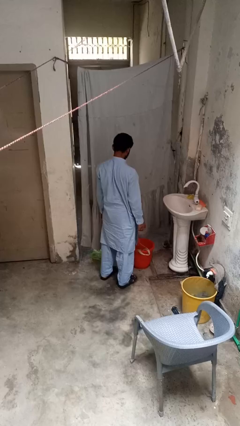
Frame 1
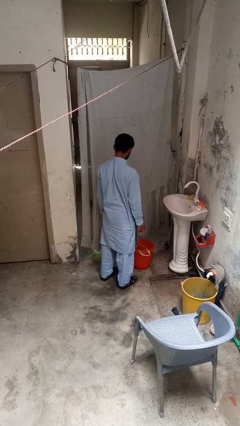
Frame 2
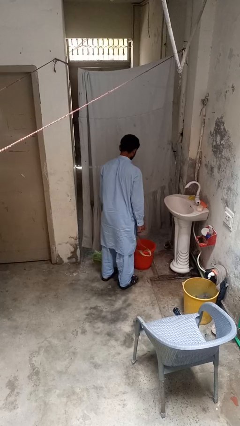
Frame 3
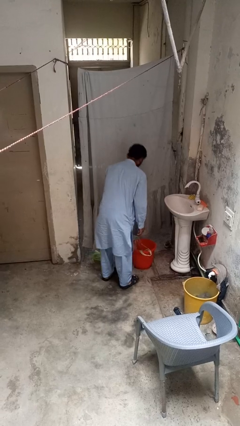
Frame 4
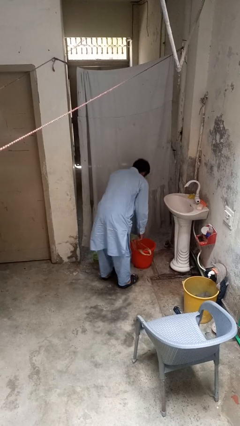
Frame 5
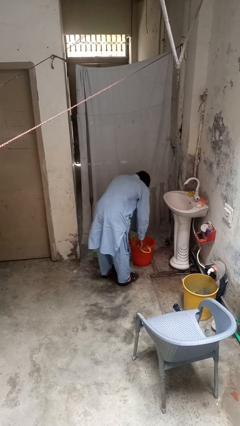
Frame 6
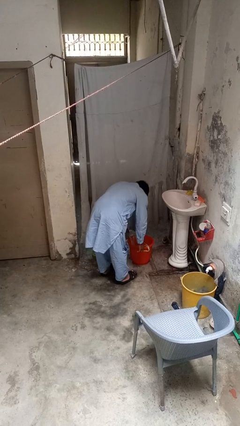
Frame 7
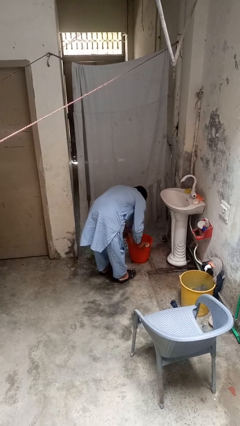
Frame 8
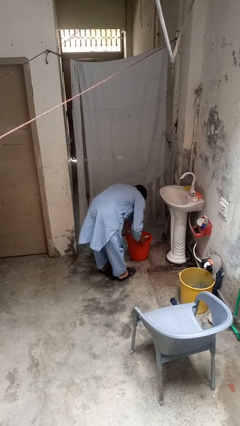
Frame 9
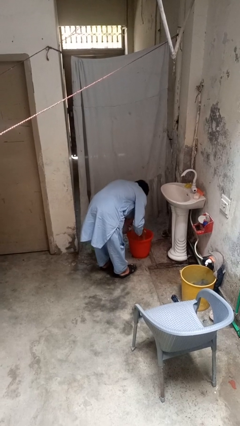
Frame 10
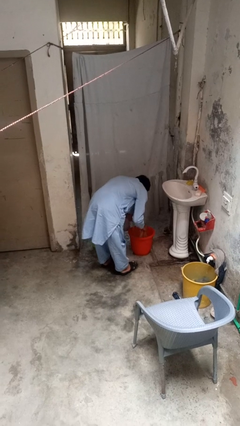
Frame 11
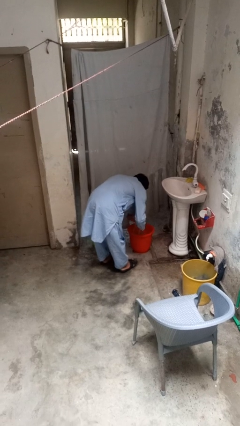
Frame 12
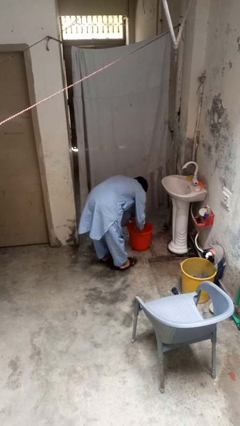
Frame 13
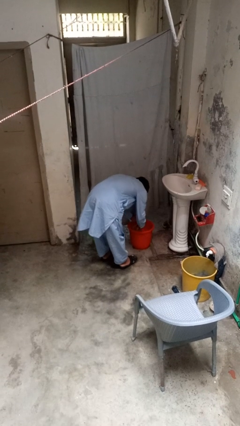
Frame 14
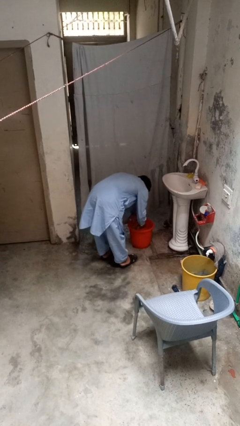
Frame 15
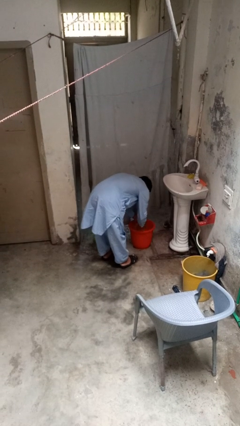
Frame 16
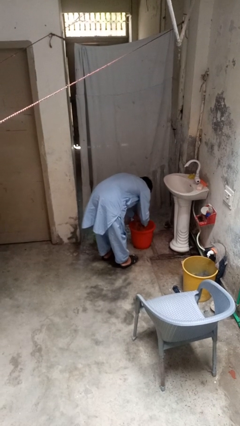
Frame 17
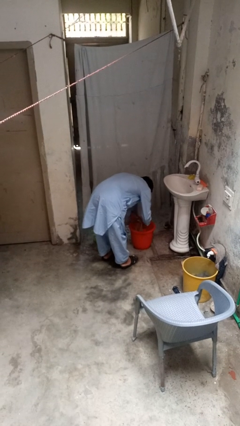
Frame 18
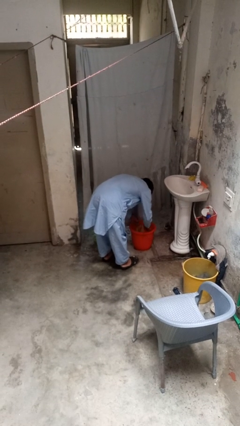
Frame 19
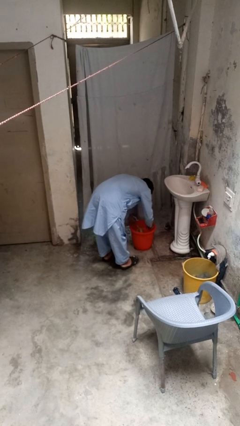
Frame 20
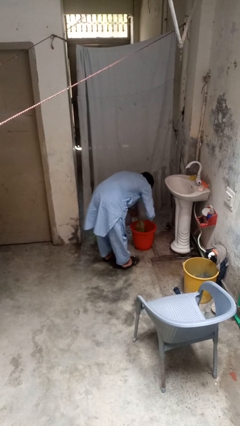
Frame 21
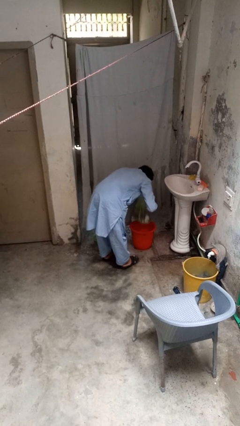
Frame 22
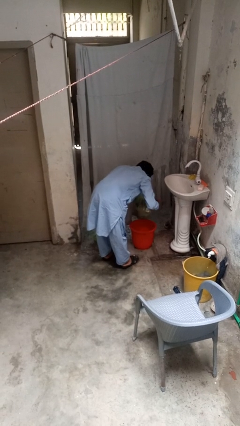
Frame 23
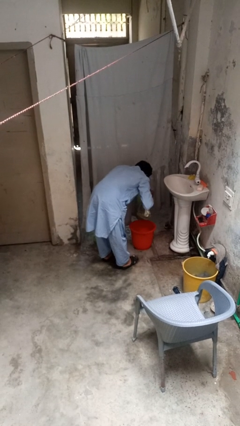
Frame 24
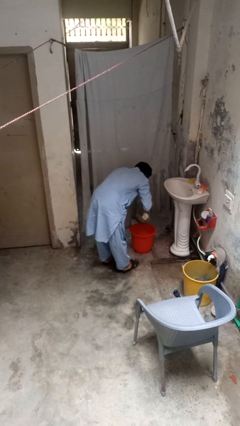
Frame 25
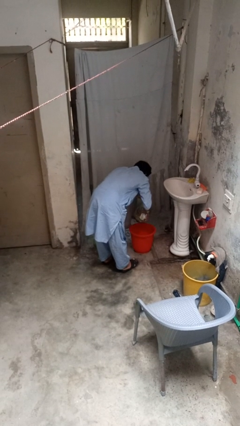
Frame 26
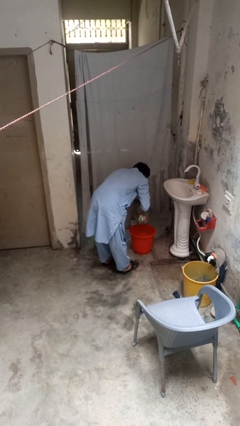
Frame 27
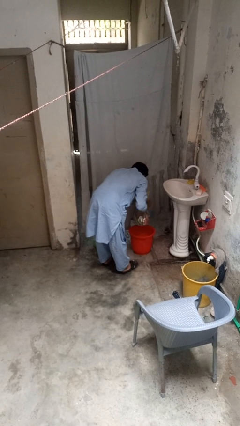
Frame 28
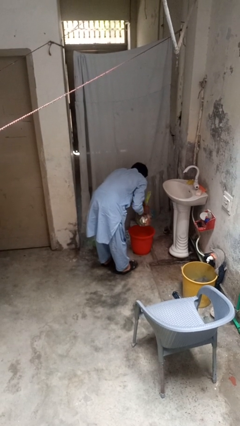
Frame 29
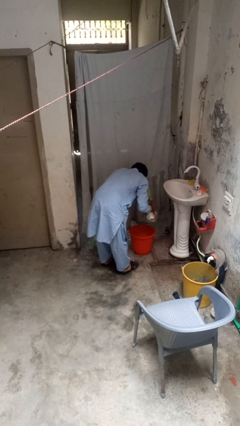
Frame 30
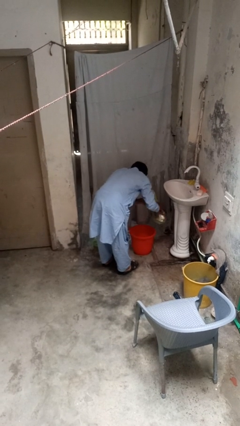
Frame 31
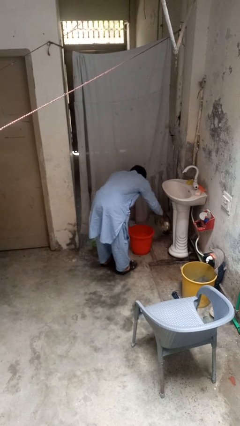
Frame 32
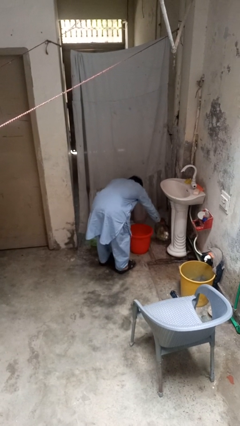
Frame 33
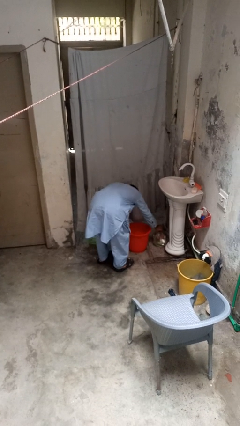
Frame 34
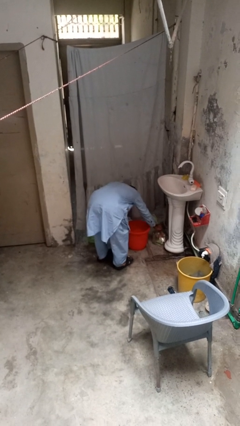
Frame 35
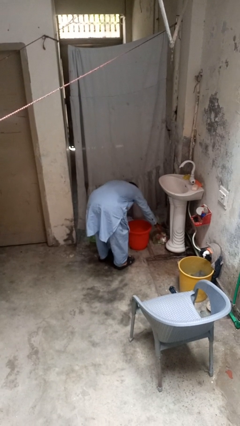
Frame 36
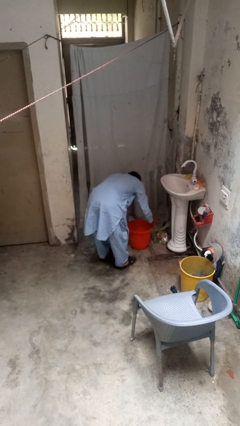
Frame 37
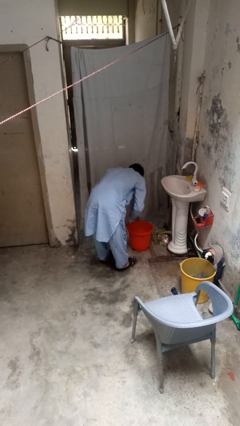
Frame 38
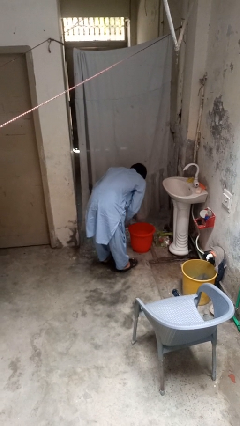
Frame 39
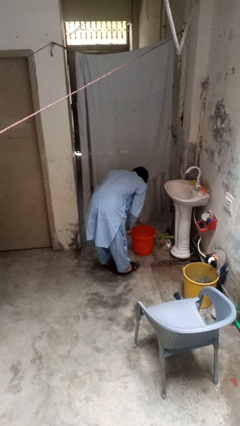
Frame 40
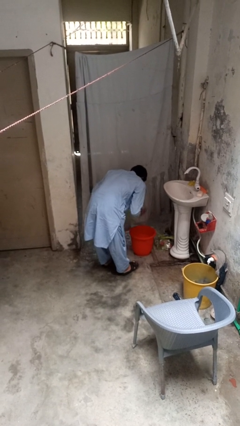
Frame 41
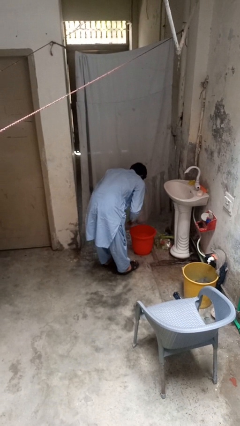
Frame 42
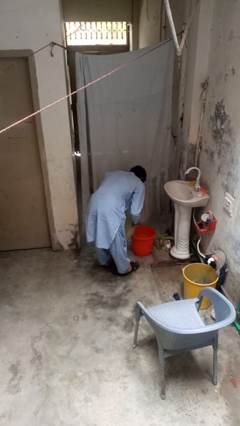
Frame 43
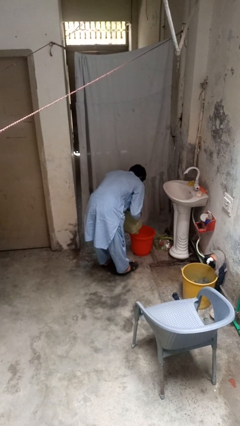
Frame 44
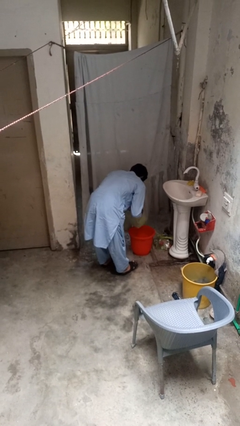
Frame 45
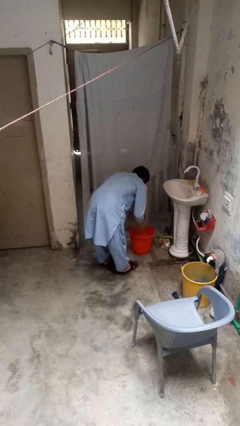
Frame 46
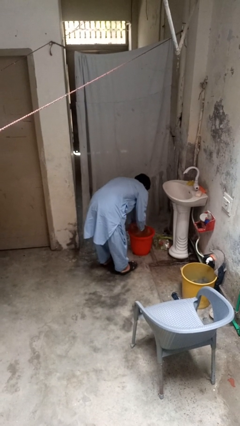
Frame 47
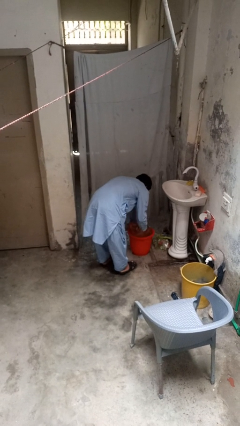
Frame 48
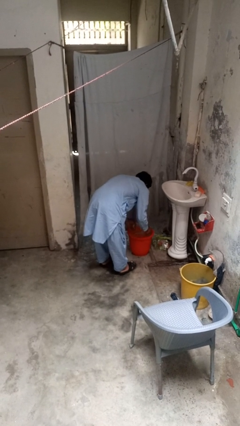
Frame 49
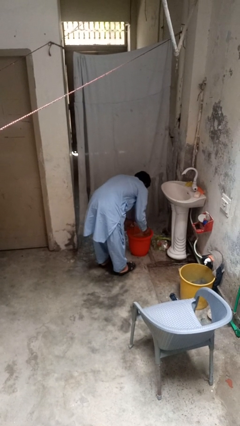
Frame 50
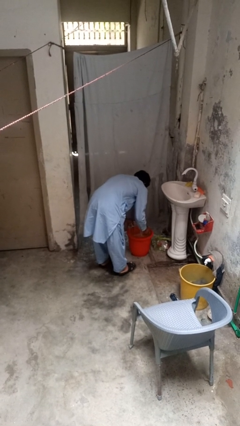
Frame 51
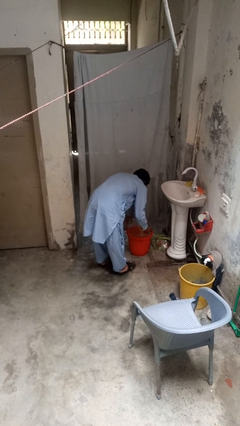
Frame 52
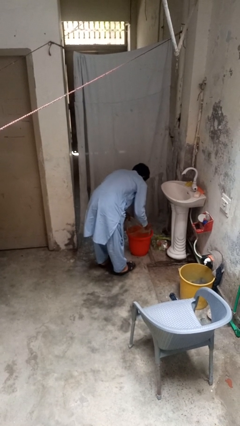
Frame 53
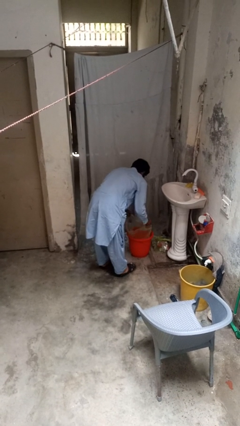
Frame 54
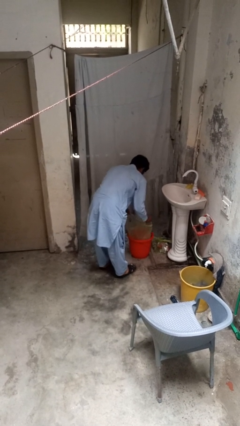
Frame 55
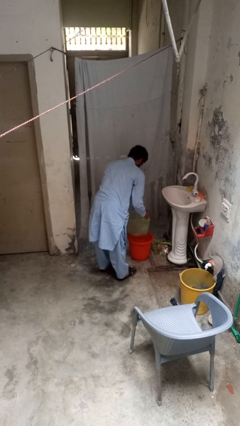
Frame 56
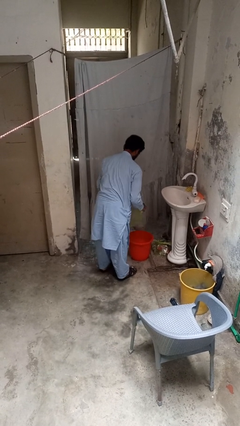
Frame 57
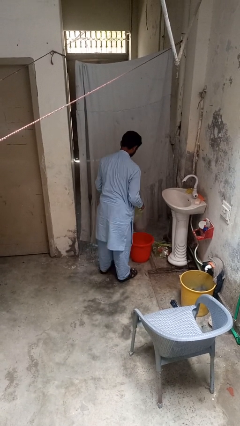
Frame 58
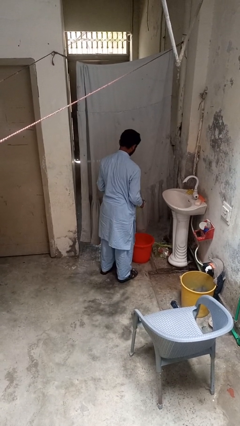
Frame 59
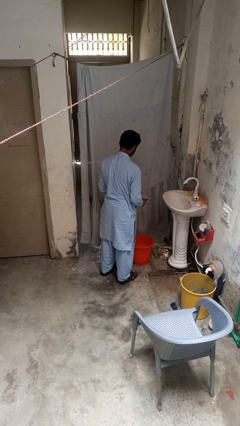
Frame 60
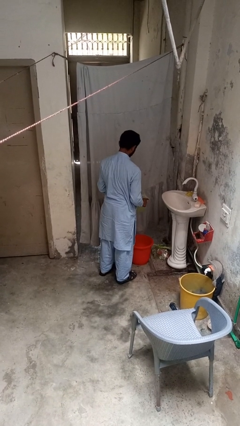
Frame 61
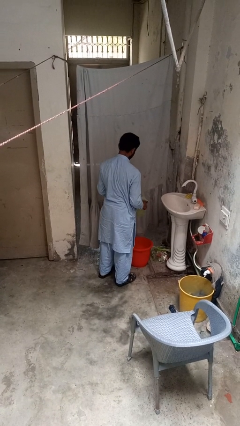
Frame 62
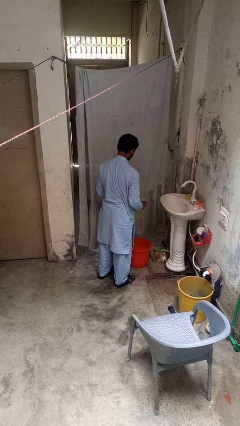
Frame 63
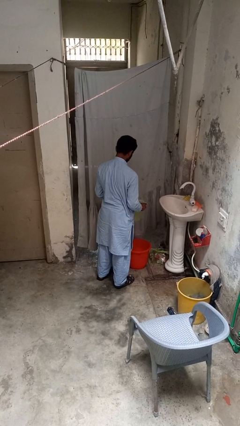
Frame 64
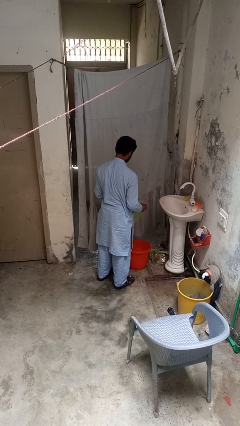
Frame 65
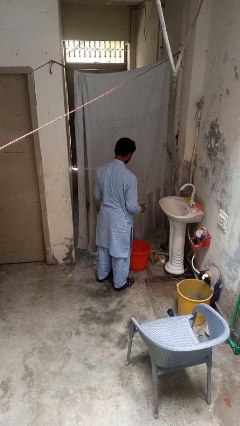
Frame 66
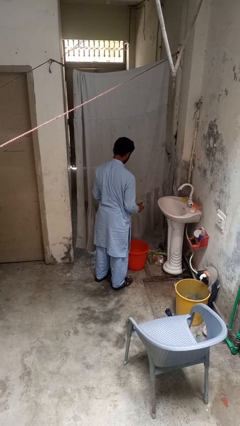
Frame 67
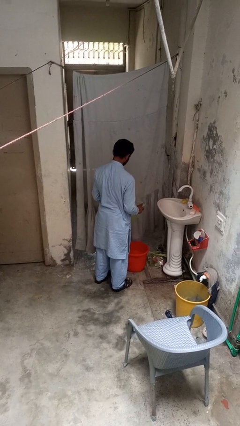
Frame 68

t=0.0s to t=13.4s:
person removes trashbag from trashcan

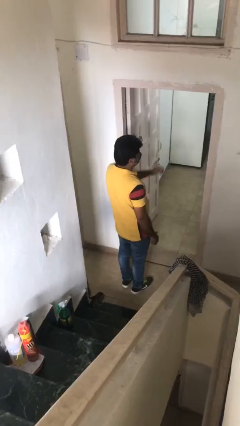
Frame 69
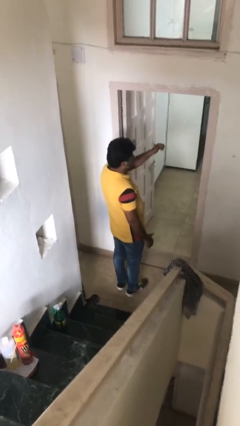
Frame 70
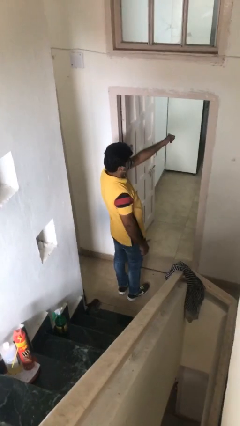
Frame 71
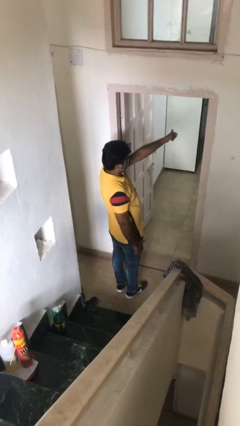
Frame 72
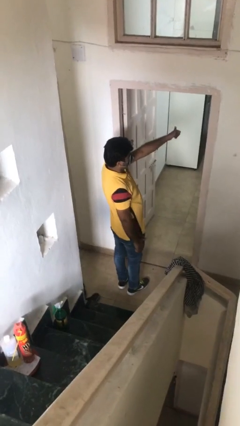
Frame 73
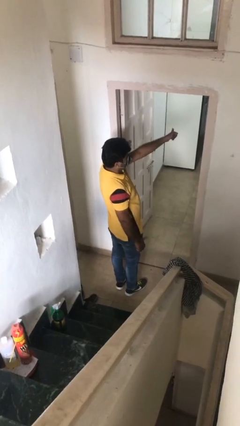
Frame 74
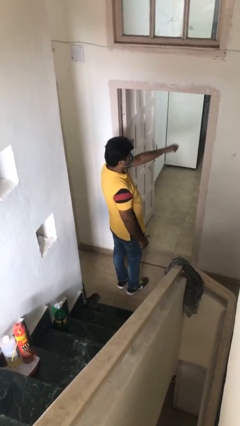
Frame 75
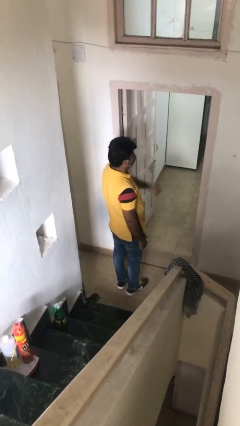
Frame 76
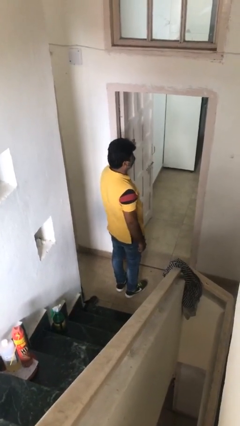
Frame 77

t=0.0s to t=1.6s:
person gestures thumbs up

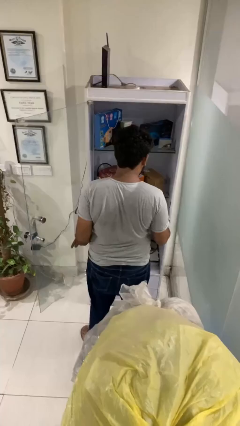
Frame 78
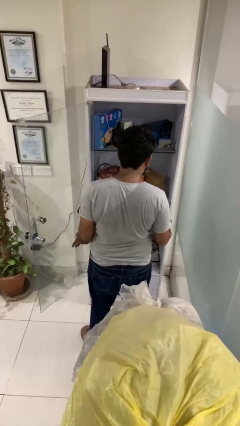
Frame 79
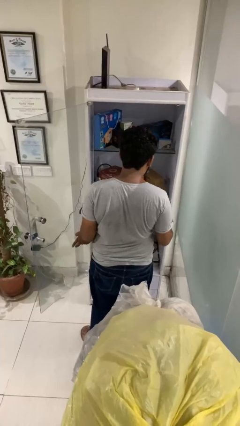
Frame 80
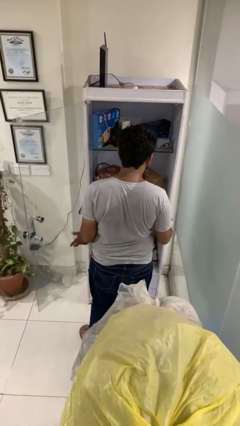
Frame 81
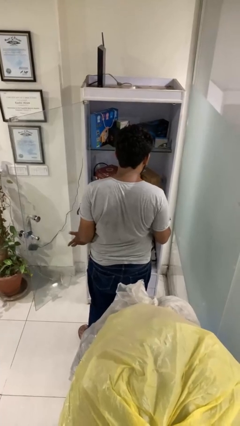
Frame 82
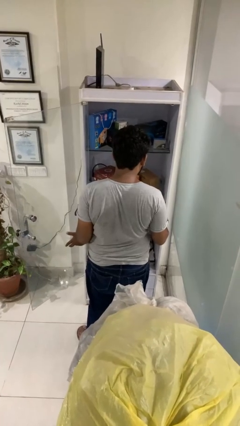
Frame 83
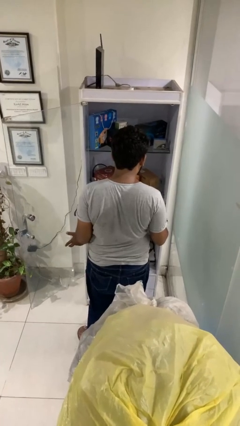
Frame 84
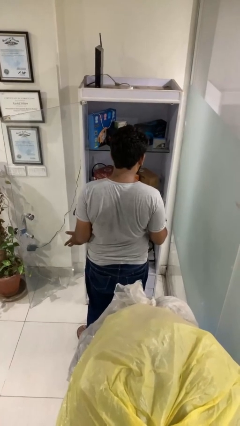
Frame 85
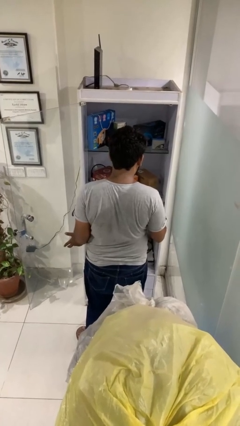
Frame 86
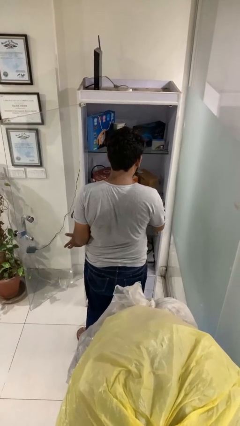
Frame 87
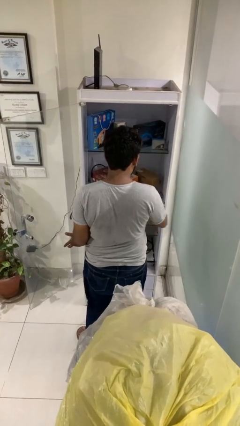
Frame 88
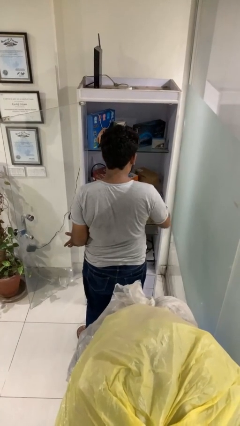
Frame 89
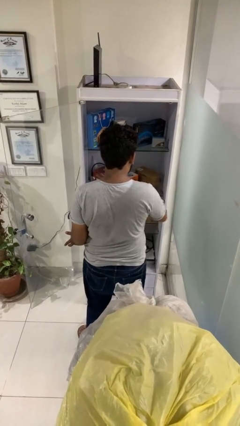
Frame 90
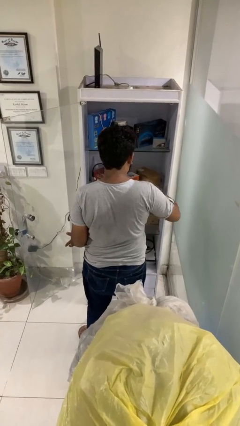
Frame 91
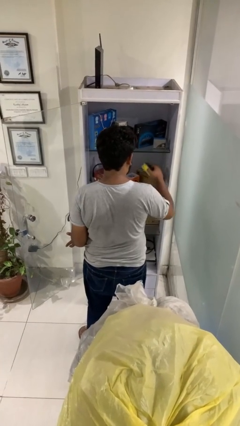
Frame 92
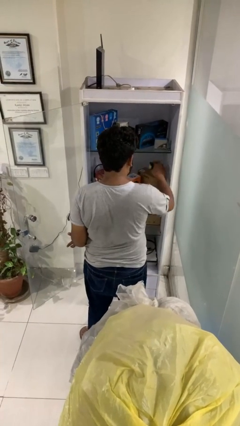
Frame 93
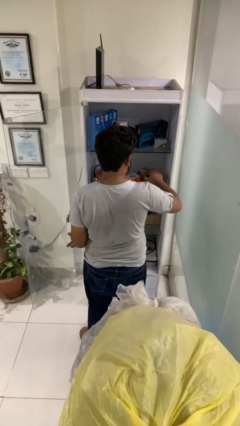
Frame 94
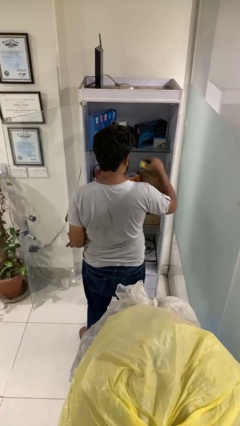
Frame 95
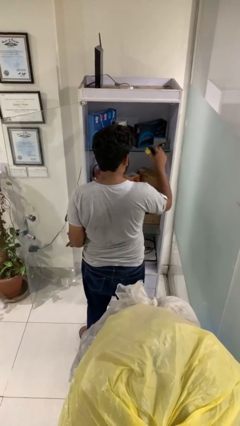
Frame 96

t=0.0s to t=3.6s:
person dusts furniture
